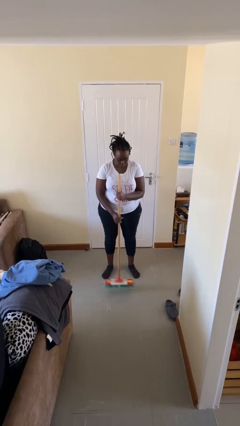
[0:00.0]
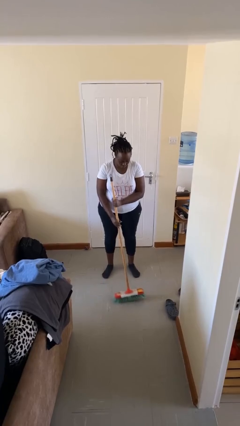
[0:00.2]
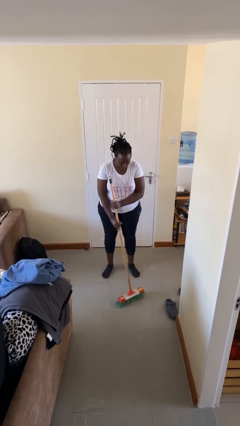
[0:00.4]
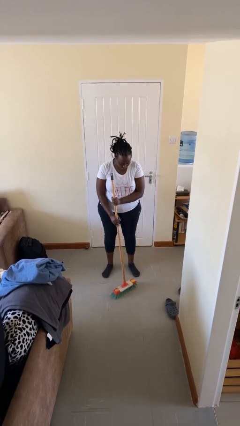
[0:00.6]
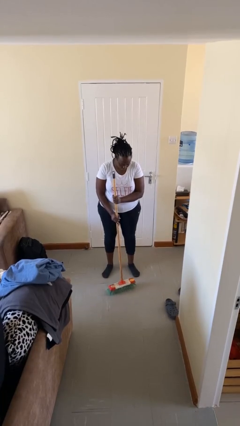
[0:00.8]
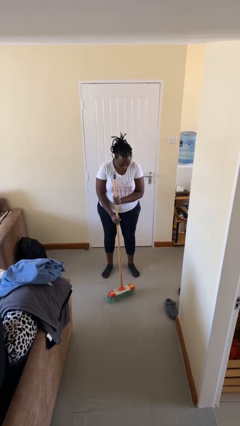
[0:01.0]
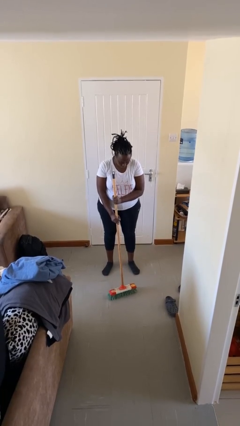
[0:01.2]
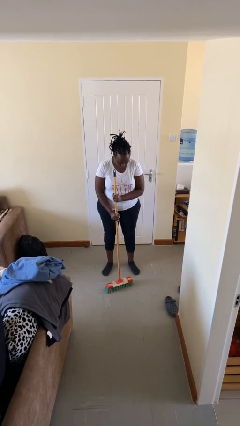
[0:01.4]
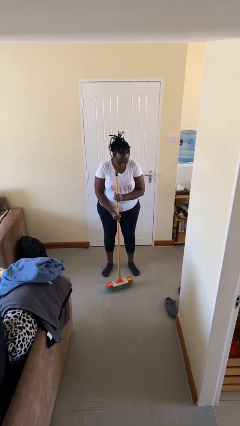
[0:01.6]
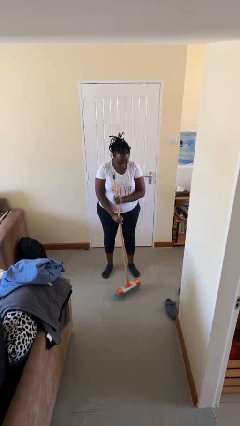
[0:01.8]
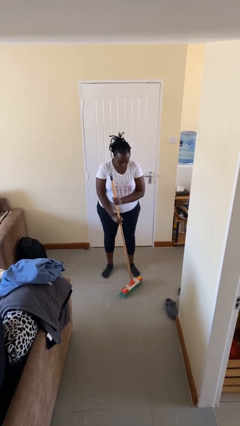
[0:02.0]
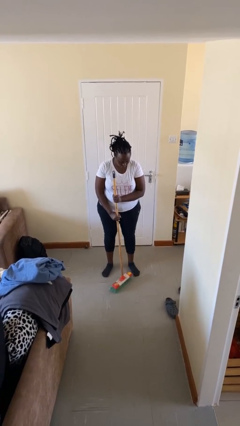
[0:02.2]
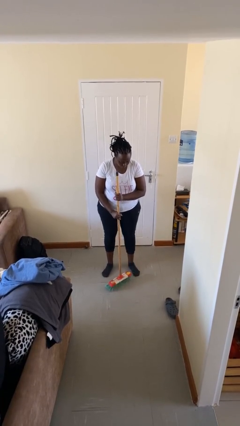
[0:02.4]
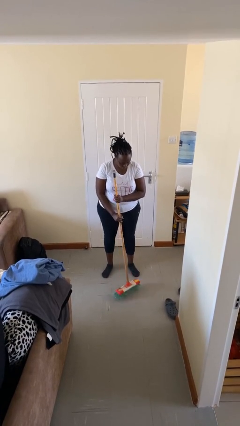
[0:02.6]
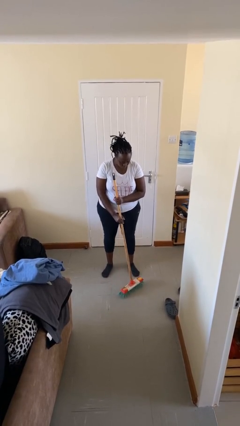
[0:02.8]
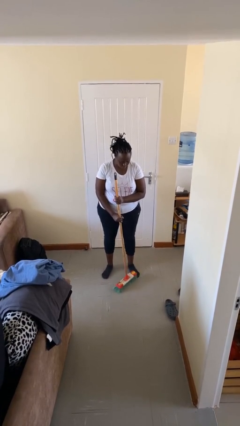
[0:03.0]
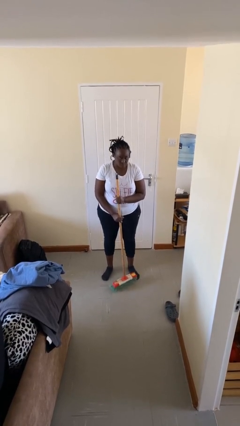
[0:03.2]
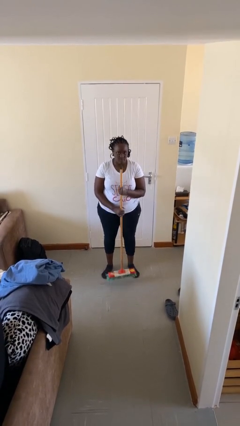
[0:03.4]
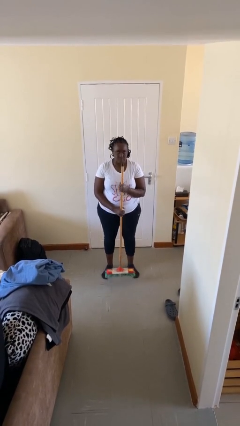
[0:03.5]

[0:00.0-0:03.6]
person sweeps floor

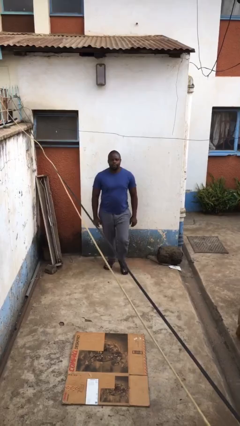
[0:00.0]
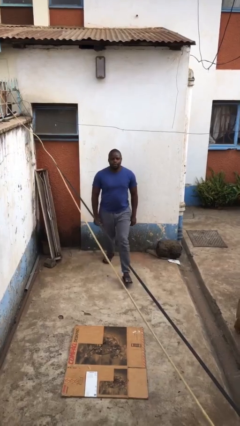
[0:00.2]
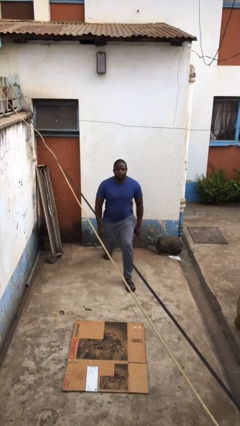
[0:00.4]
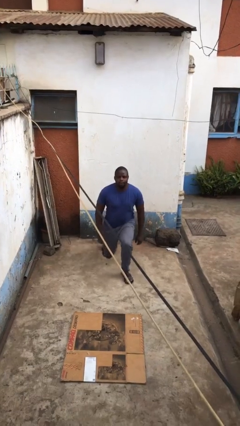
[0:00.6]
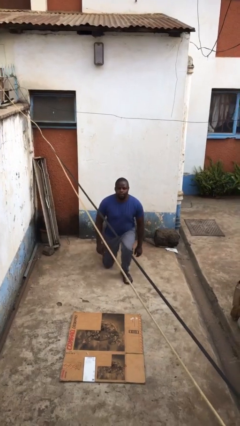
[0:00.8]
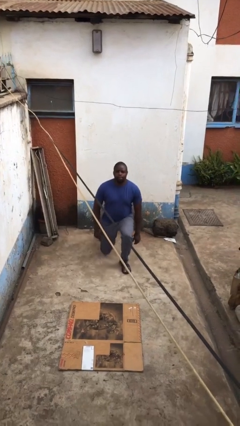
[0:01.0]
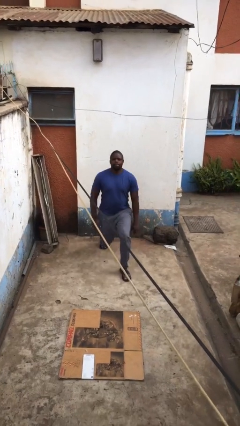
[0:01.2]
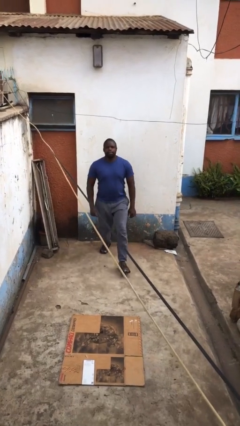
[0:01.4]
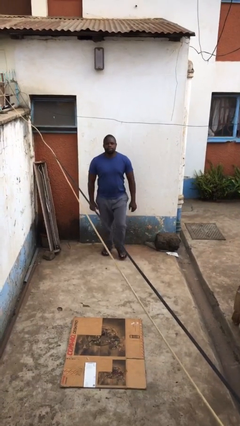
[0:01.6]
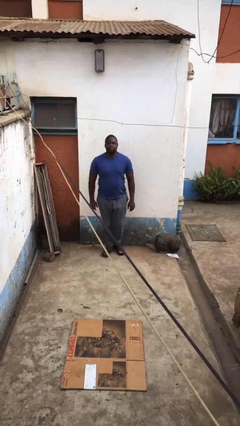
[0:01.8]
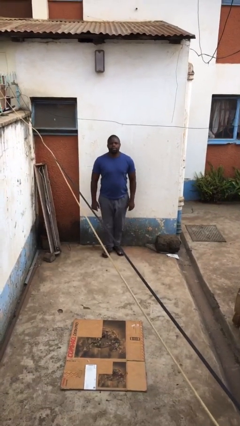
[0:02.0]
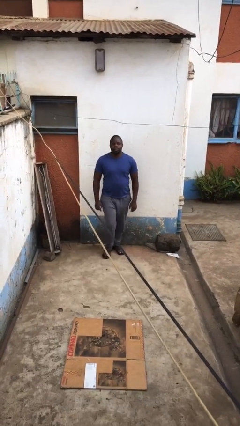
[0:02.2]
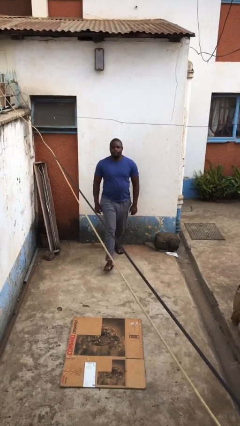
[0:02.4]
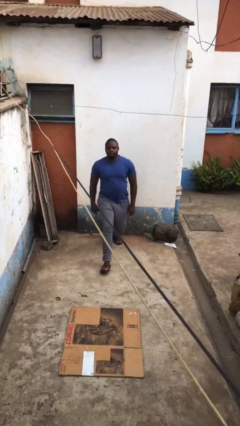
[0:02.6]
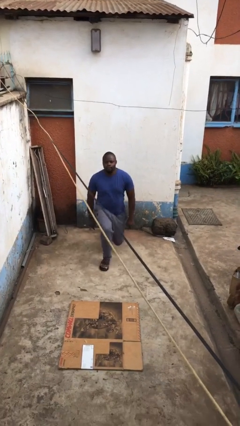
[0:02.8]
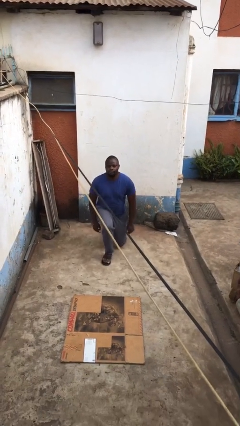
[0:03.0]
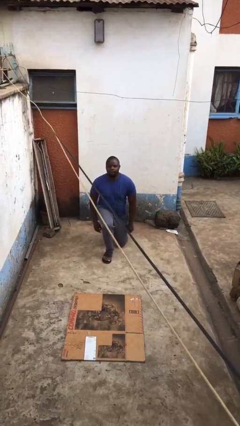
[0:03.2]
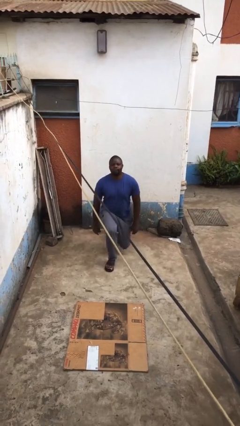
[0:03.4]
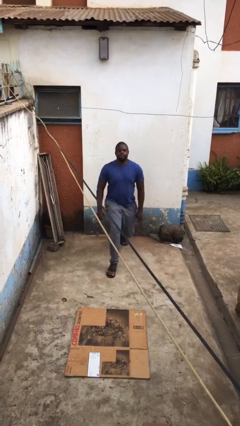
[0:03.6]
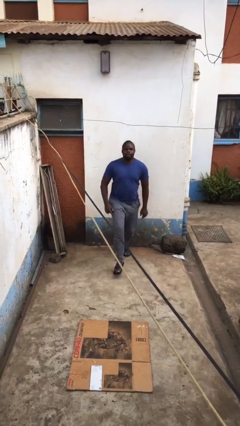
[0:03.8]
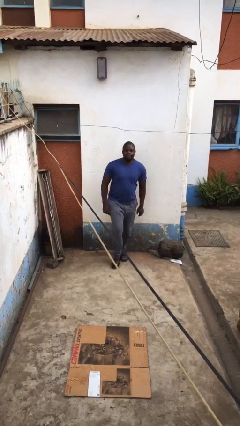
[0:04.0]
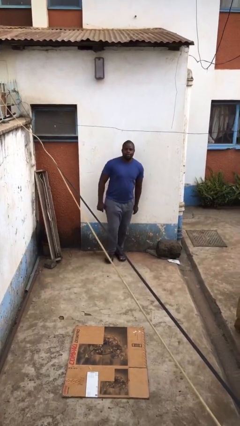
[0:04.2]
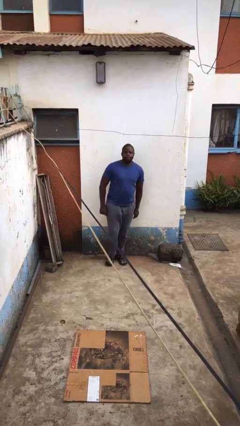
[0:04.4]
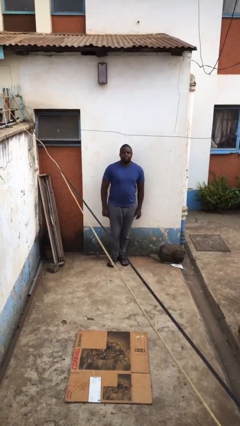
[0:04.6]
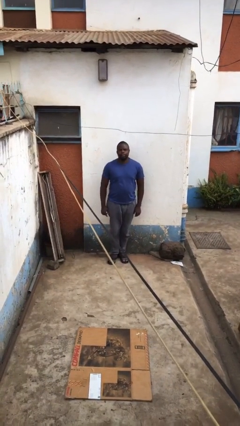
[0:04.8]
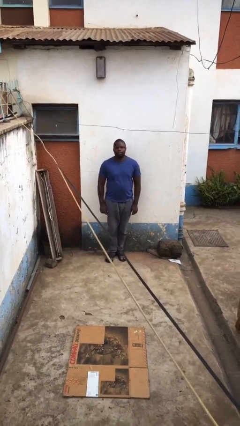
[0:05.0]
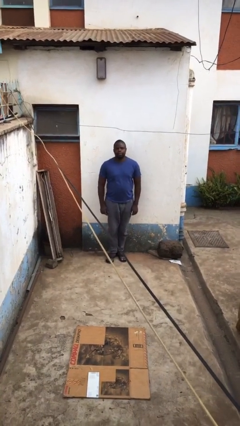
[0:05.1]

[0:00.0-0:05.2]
person exercises with lunges

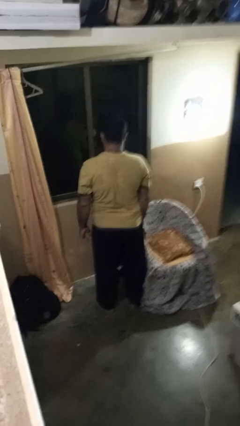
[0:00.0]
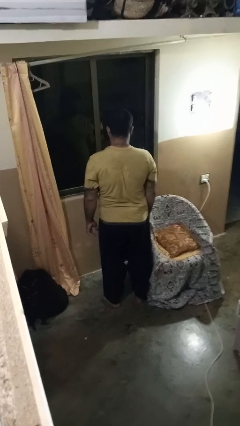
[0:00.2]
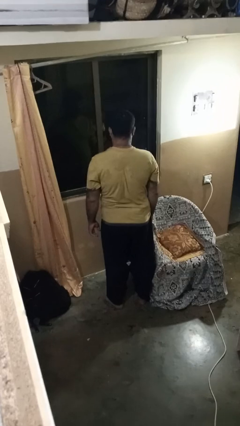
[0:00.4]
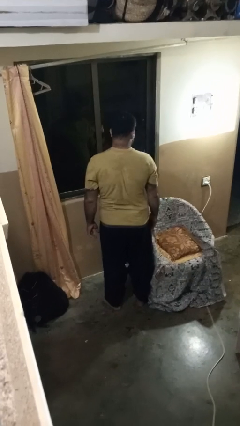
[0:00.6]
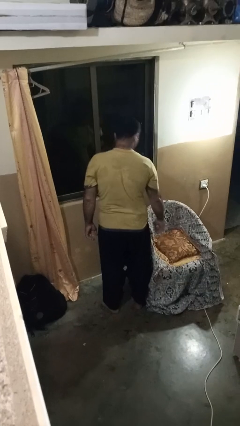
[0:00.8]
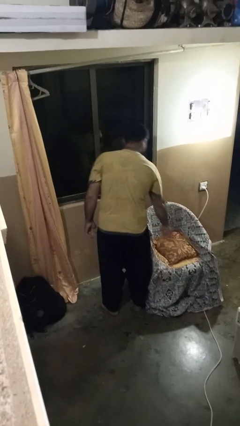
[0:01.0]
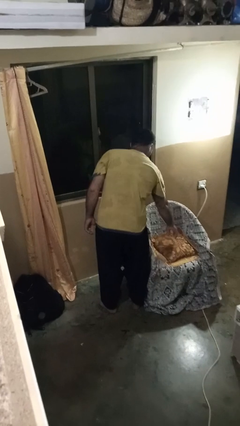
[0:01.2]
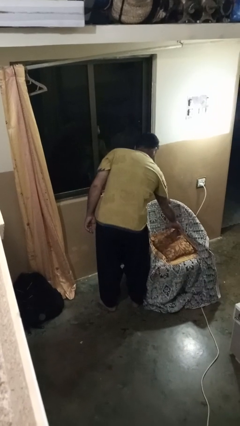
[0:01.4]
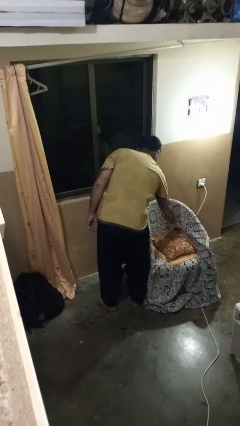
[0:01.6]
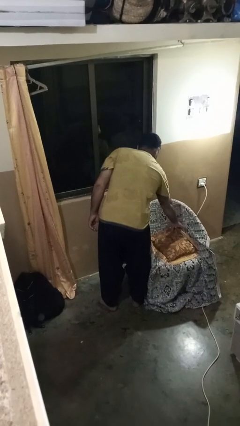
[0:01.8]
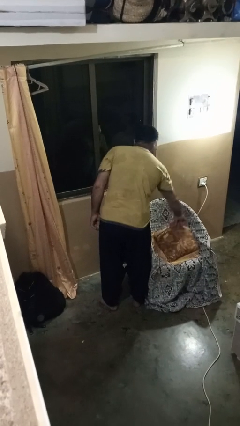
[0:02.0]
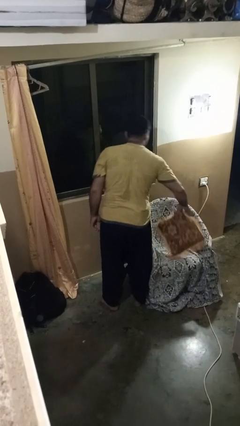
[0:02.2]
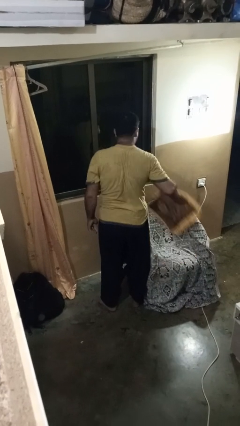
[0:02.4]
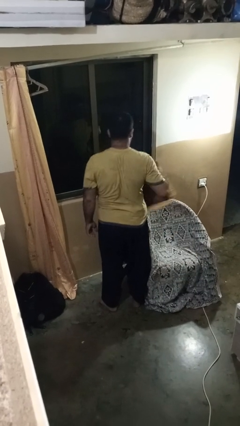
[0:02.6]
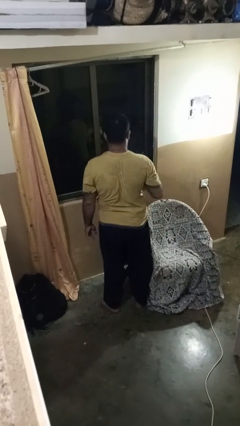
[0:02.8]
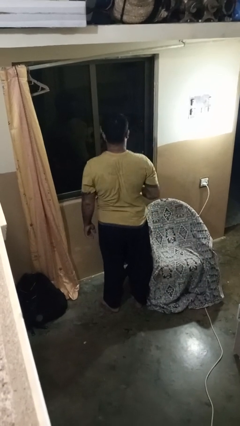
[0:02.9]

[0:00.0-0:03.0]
person picks up object from couch

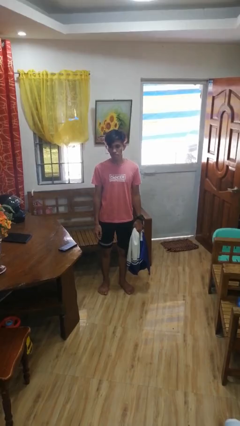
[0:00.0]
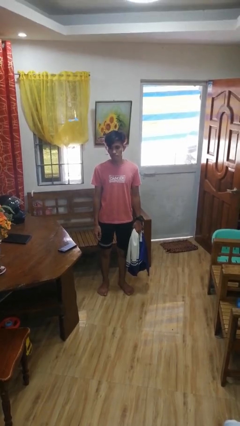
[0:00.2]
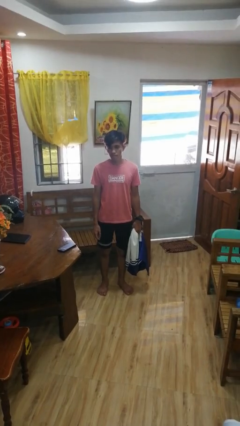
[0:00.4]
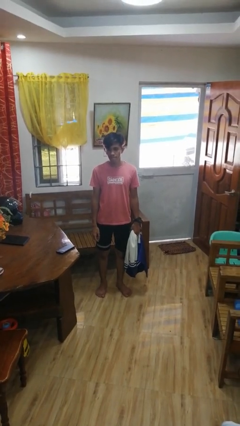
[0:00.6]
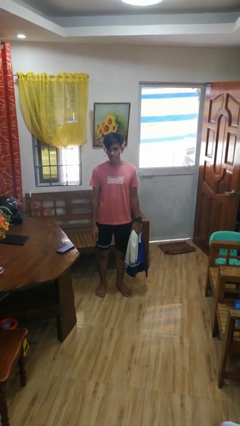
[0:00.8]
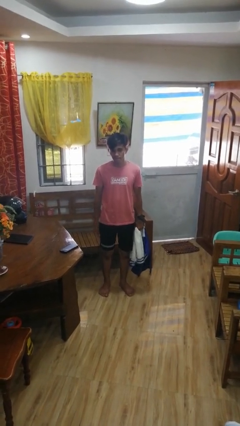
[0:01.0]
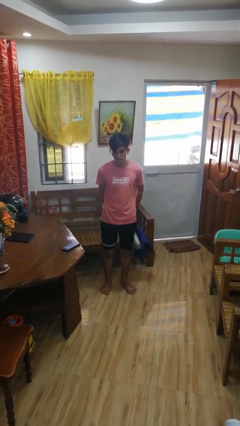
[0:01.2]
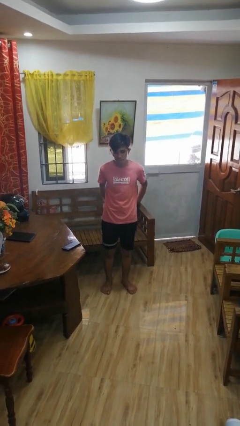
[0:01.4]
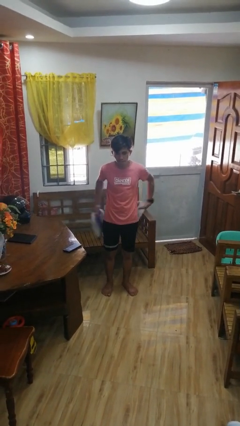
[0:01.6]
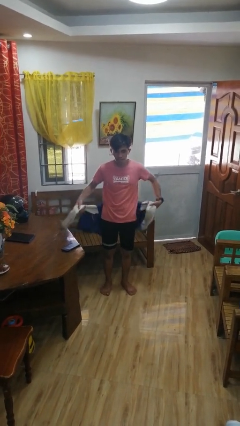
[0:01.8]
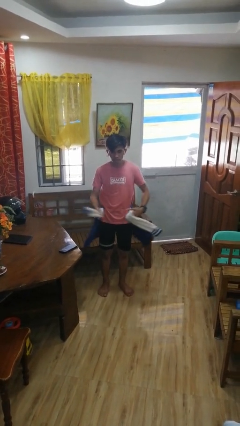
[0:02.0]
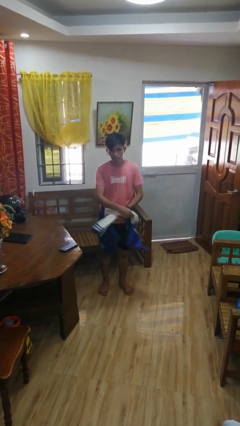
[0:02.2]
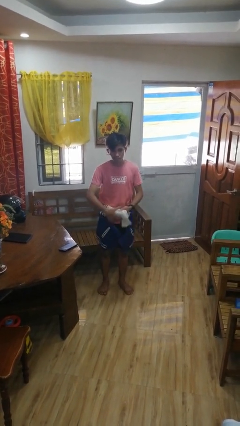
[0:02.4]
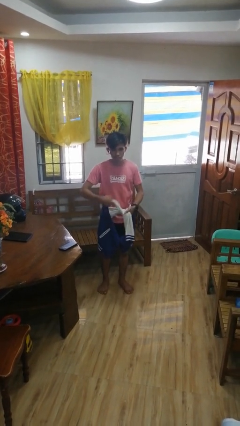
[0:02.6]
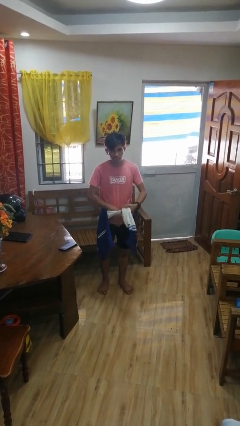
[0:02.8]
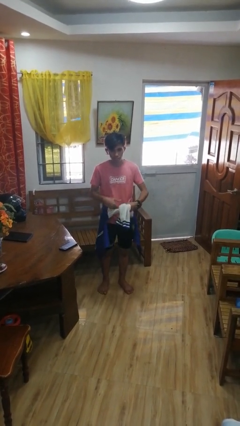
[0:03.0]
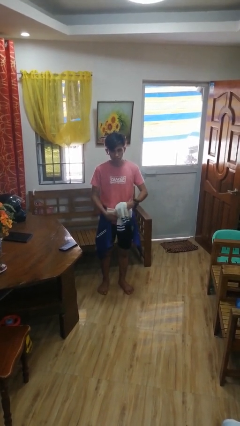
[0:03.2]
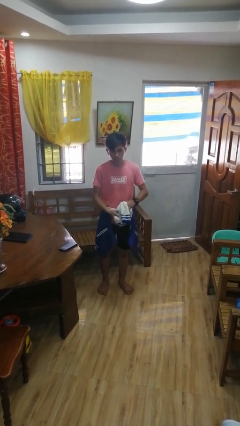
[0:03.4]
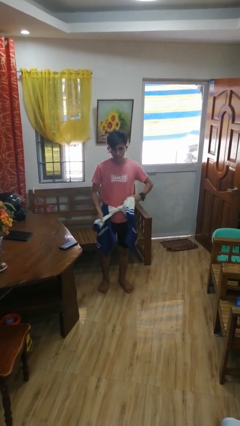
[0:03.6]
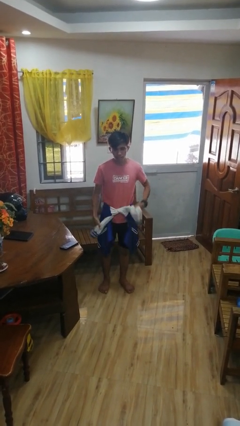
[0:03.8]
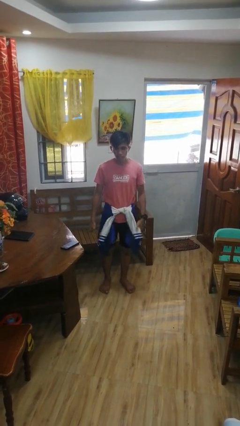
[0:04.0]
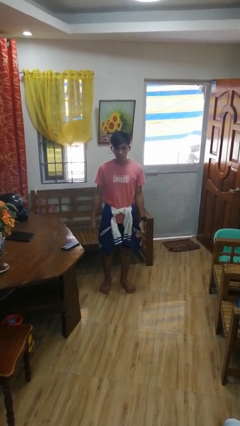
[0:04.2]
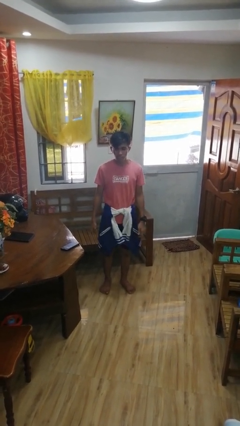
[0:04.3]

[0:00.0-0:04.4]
person ties jacket around waist

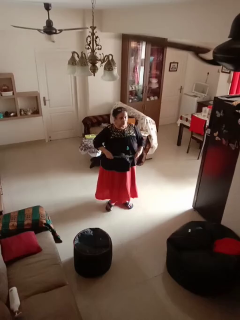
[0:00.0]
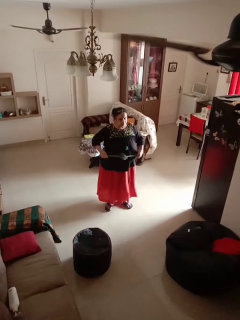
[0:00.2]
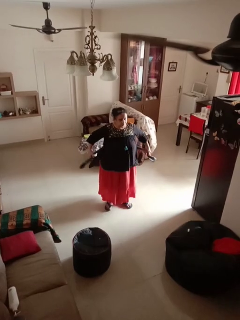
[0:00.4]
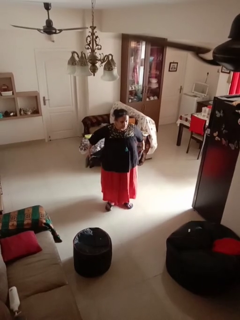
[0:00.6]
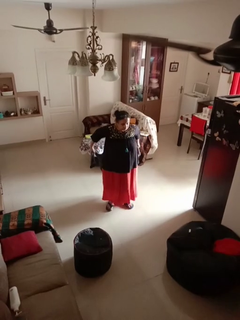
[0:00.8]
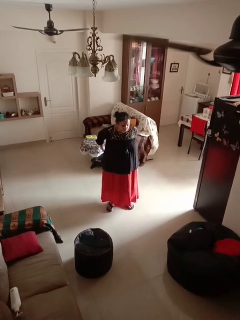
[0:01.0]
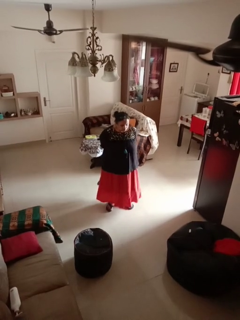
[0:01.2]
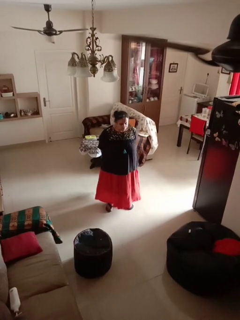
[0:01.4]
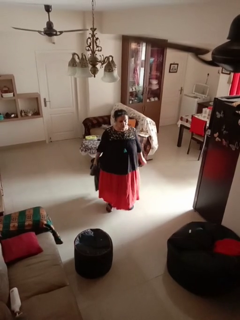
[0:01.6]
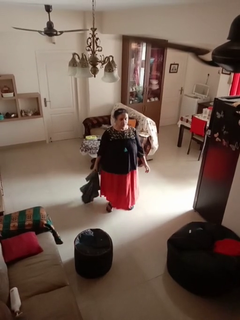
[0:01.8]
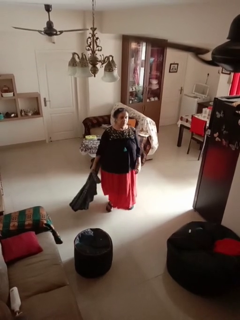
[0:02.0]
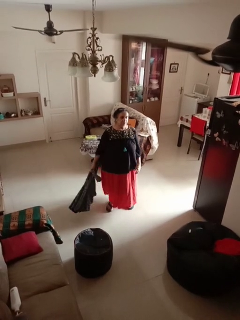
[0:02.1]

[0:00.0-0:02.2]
person unties jacket around waist
